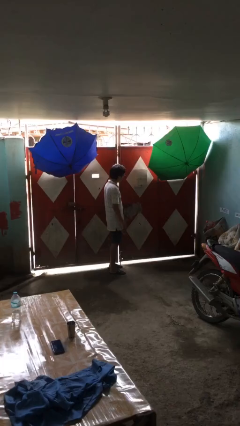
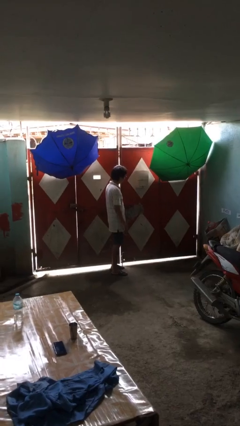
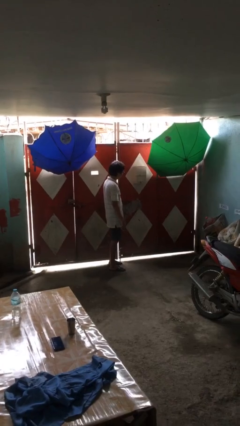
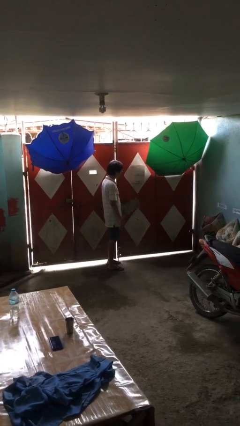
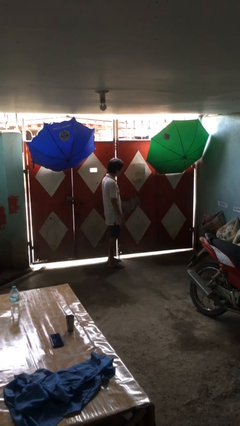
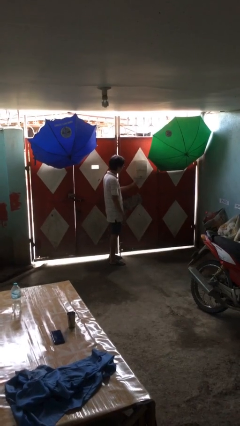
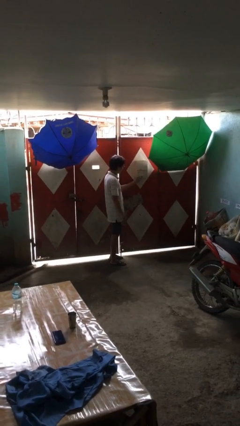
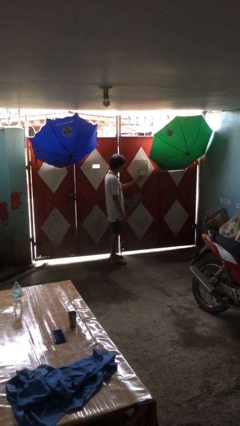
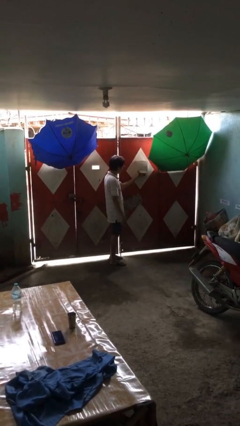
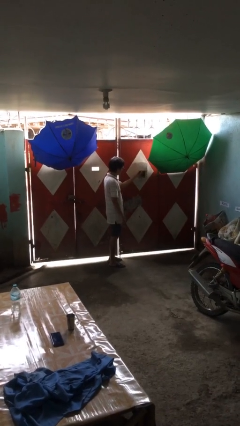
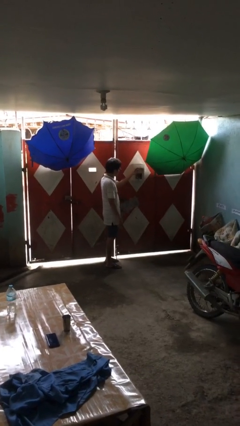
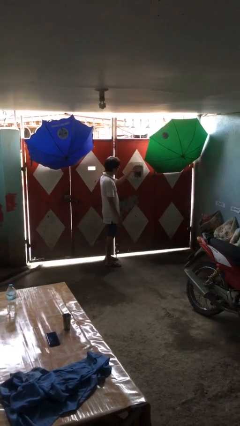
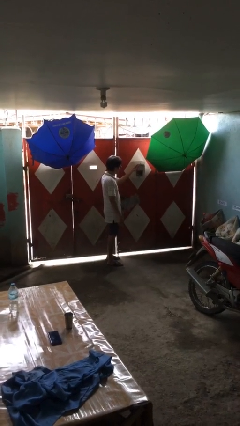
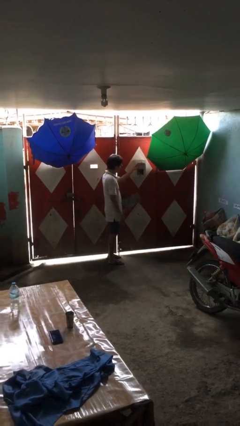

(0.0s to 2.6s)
person opens mailbox

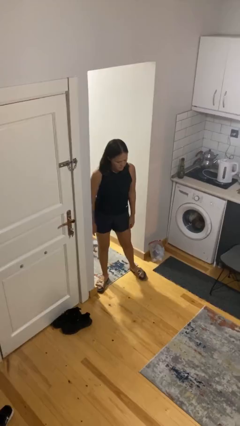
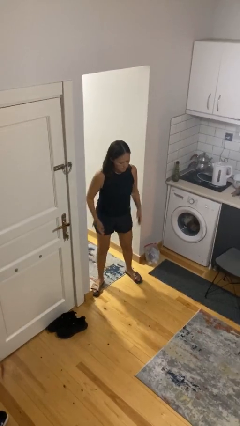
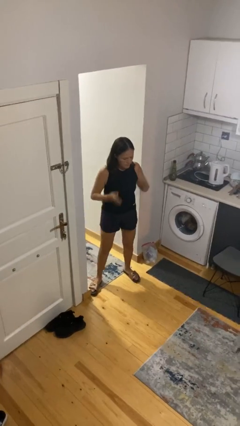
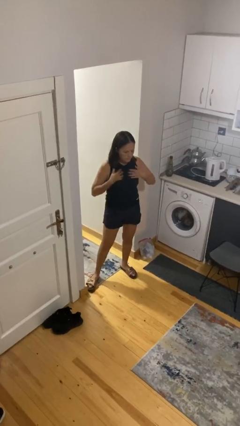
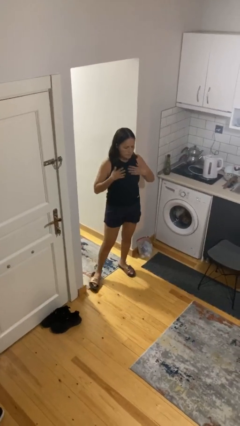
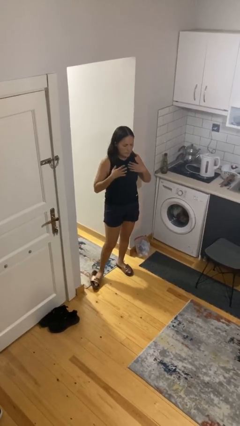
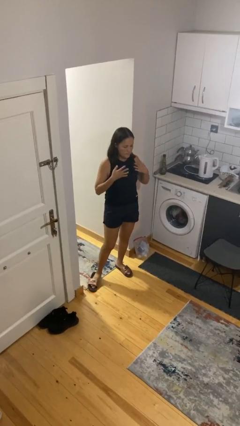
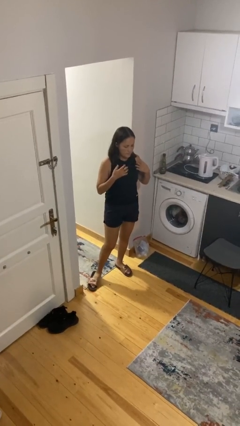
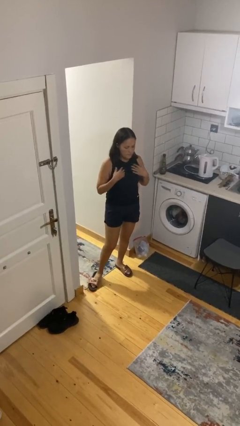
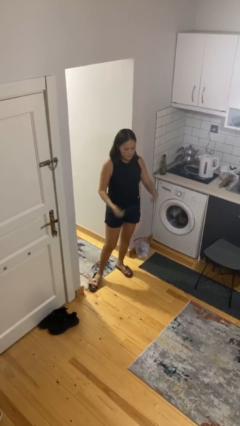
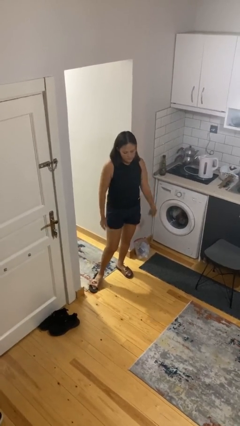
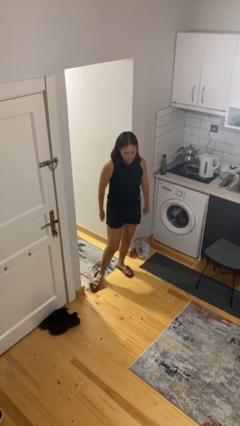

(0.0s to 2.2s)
person drums on chest

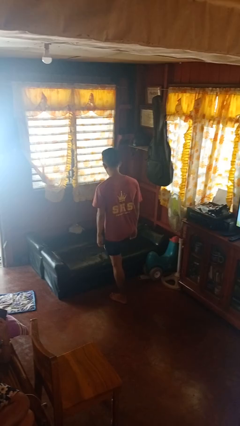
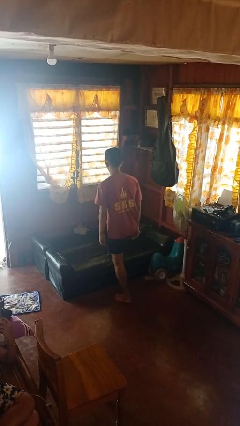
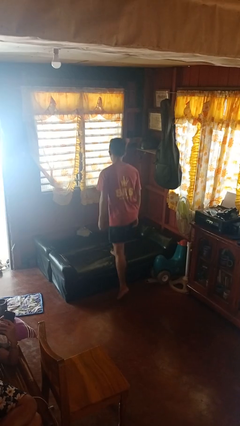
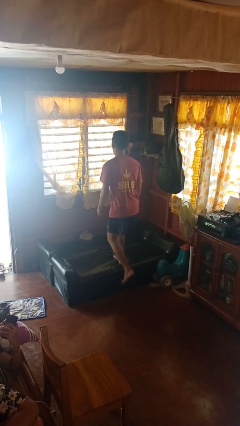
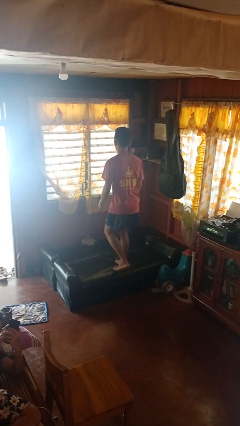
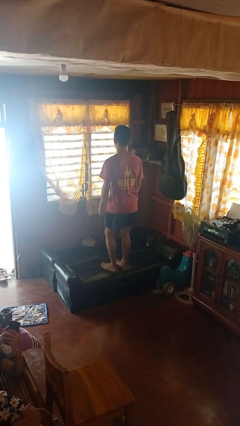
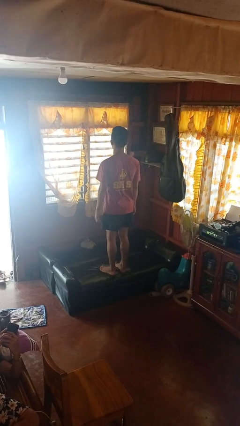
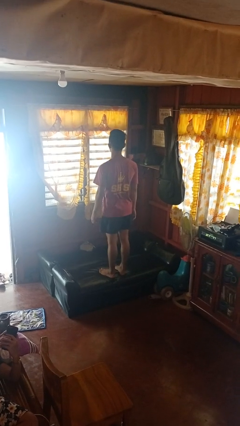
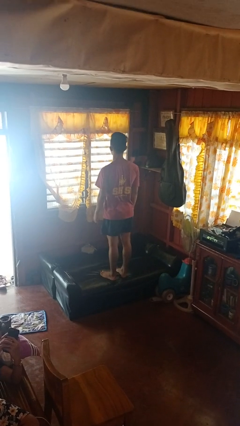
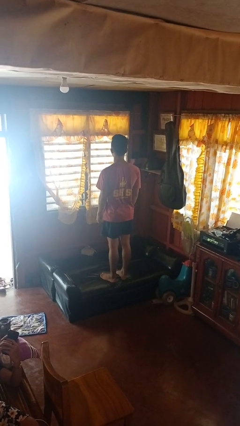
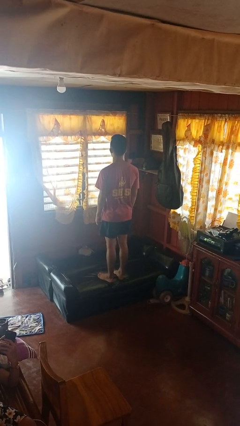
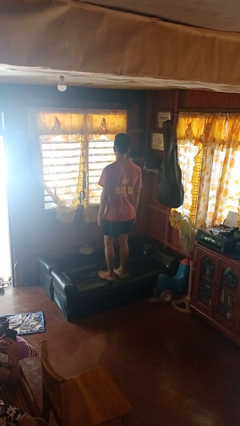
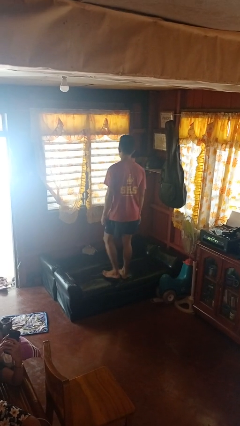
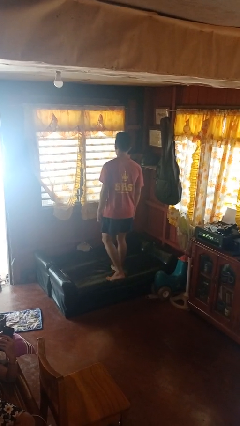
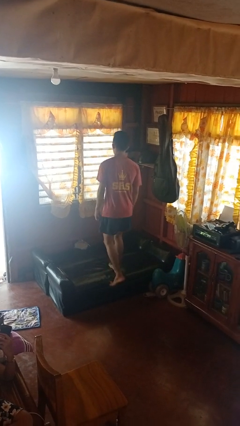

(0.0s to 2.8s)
person climbs on couch

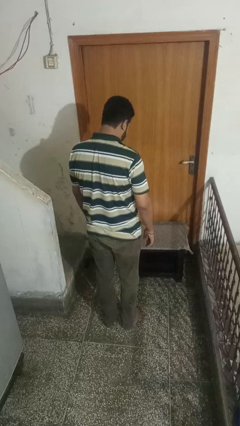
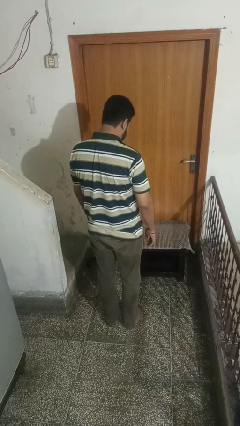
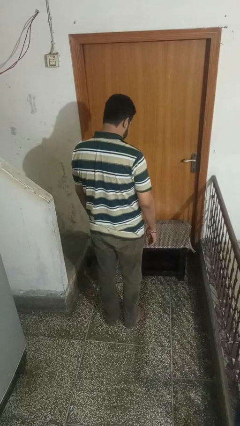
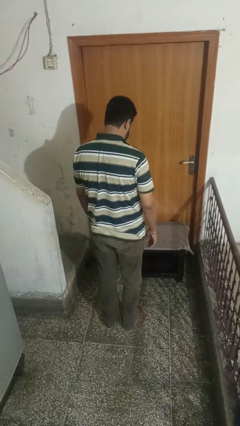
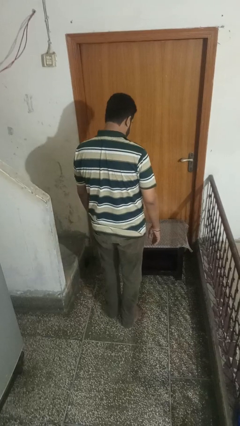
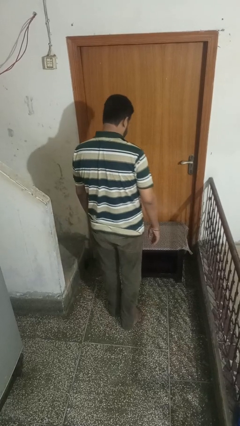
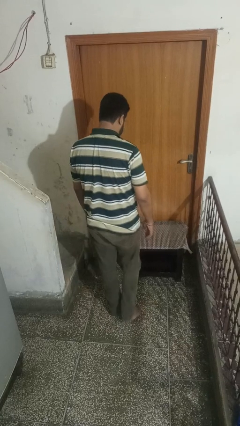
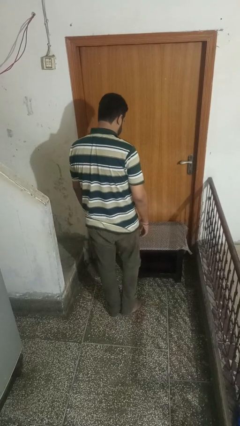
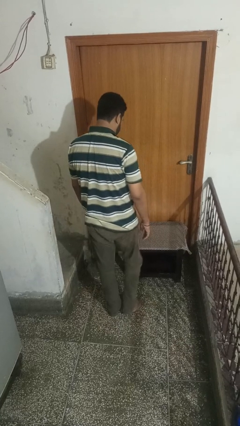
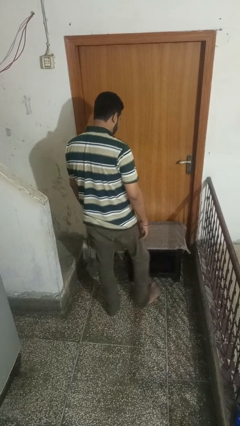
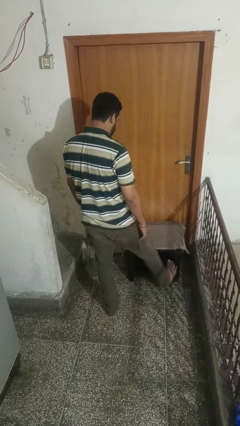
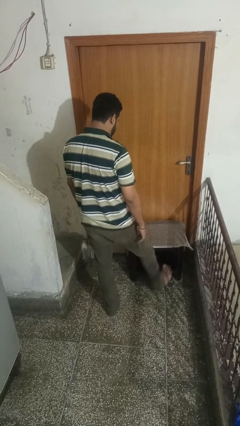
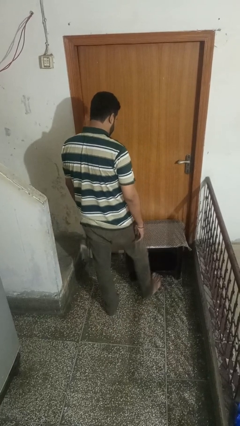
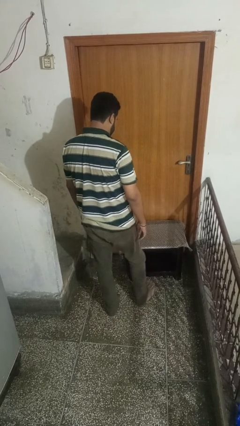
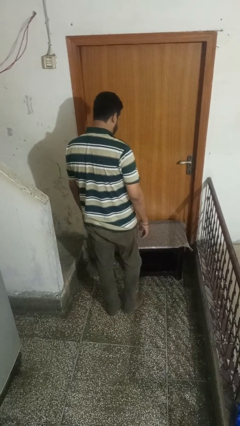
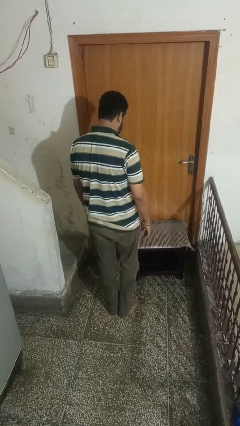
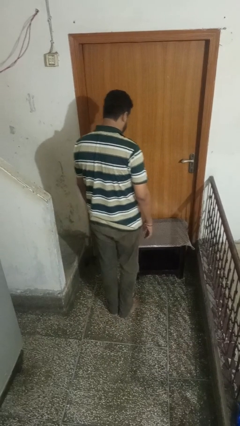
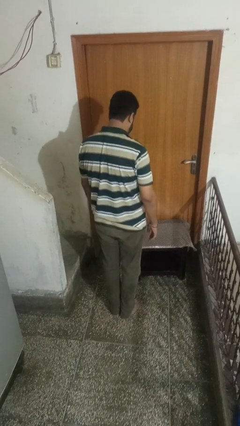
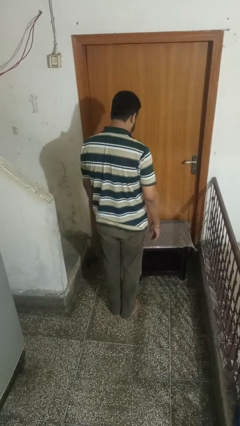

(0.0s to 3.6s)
person stubs toe

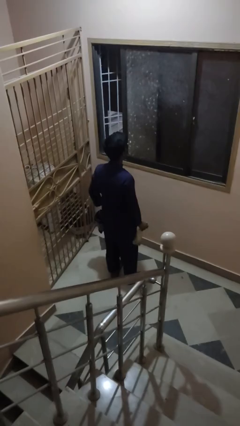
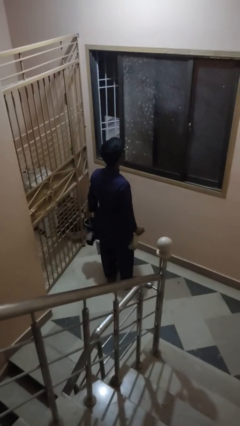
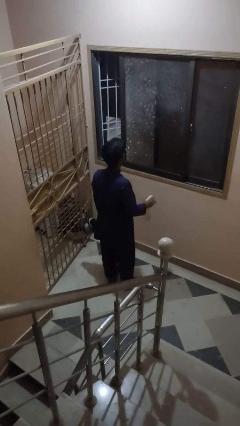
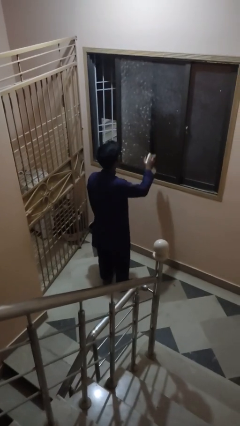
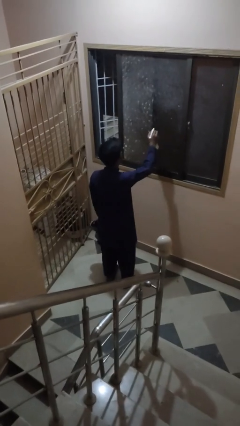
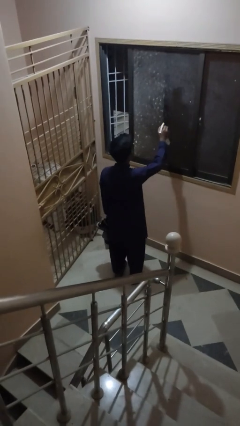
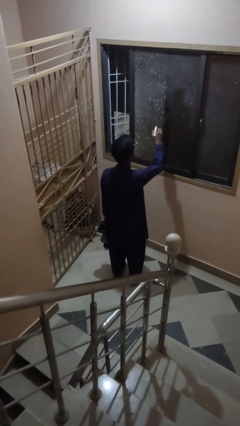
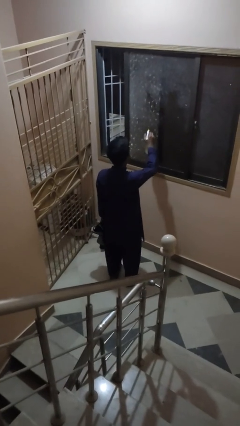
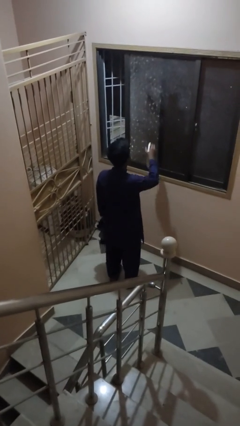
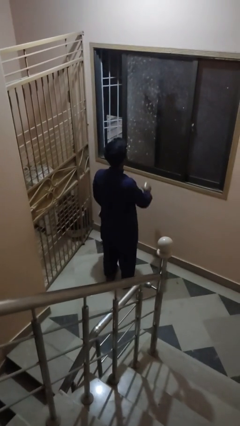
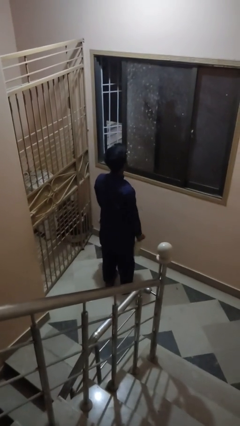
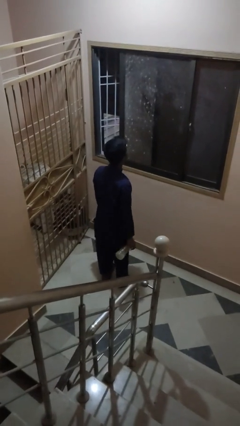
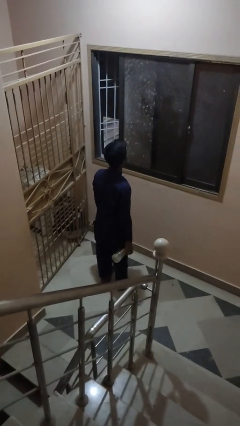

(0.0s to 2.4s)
person sprays from bottle

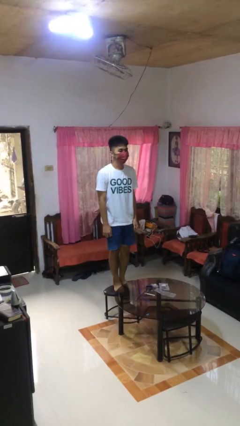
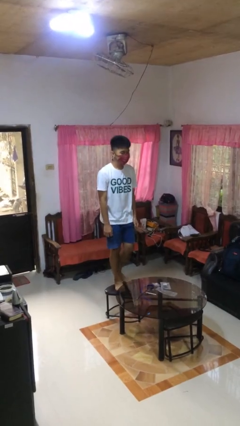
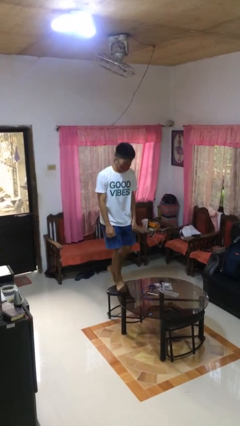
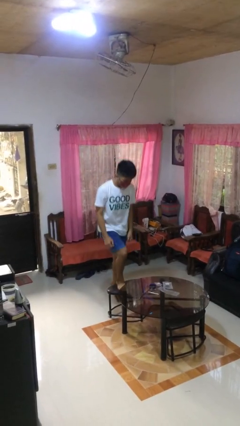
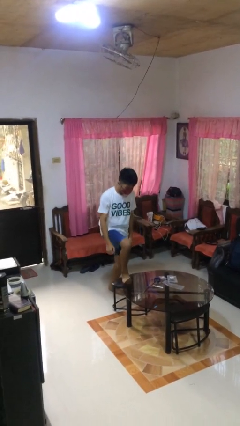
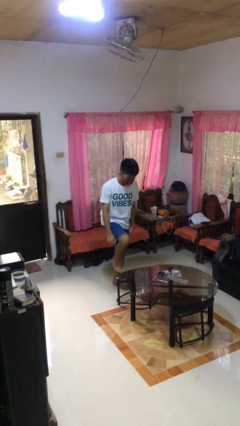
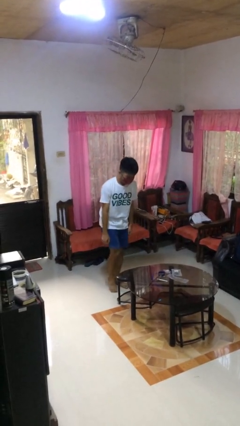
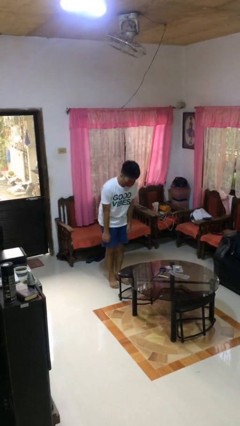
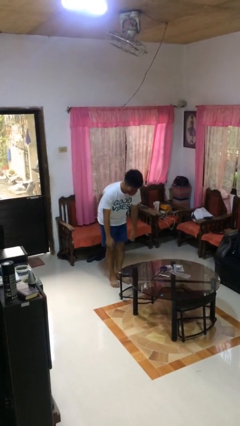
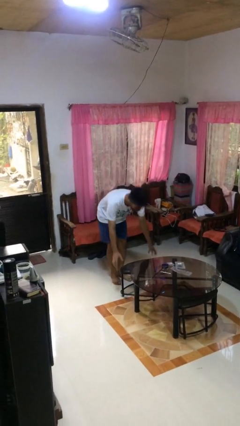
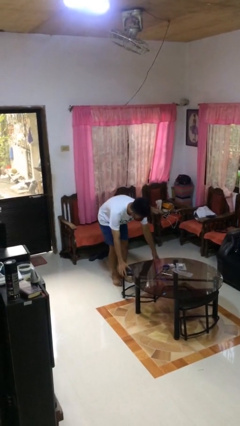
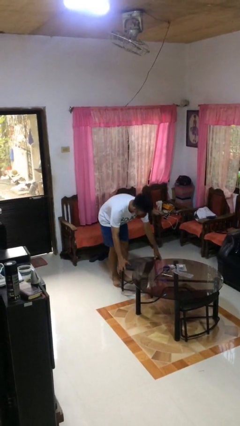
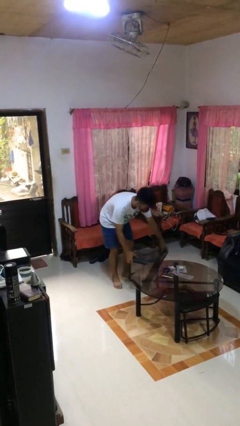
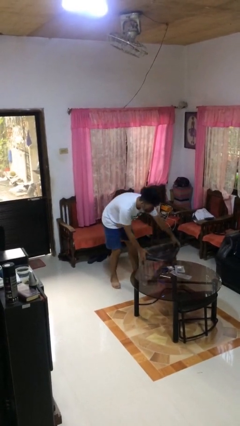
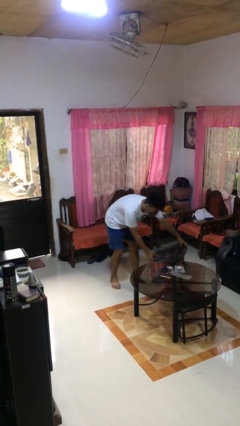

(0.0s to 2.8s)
person climbs off chair

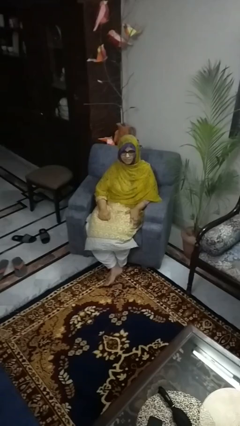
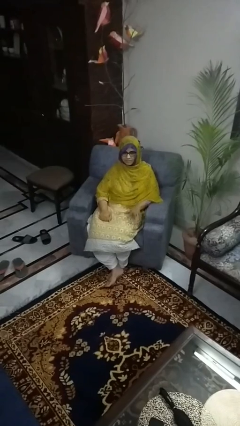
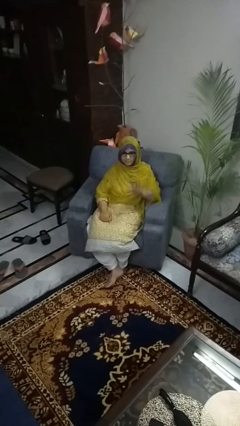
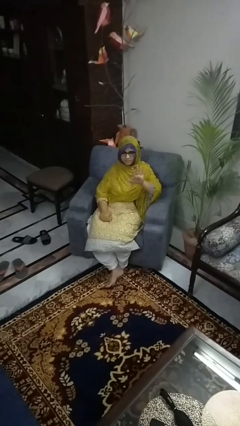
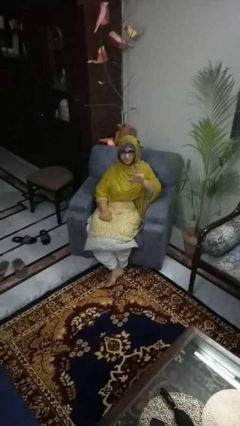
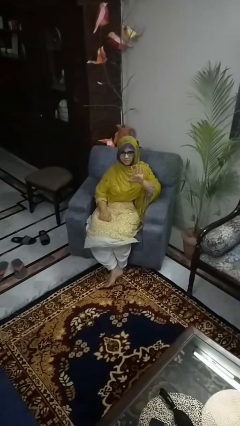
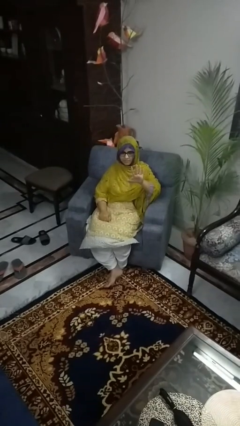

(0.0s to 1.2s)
person gestures number five
